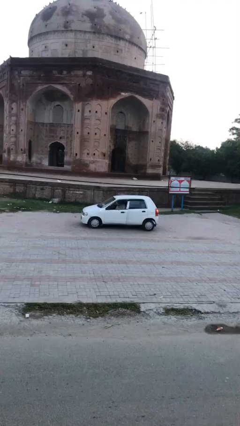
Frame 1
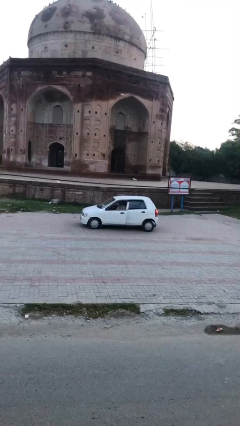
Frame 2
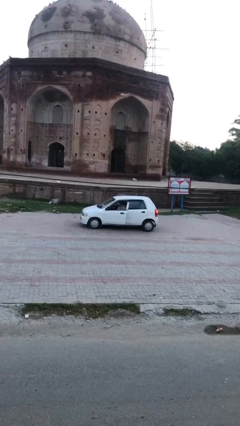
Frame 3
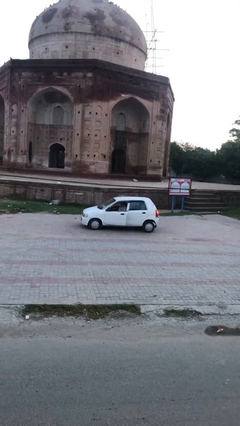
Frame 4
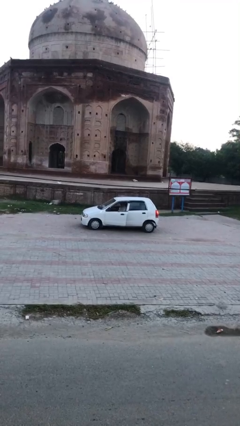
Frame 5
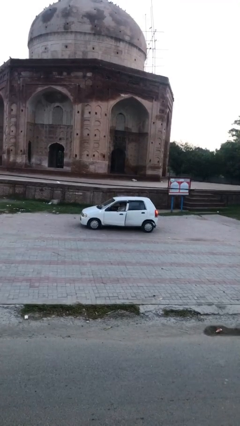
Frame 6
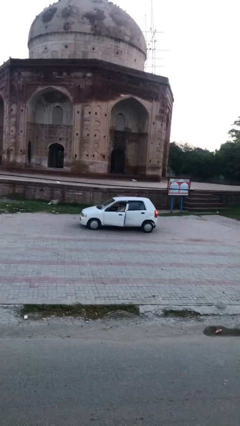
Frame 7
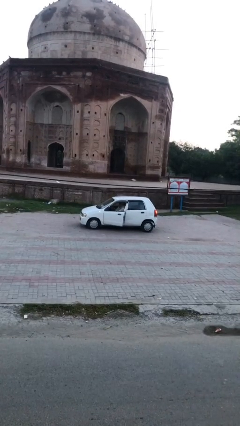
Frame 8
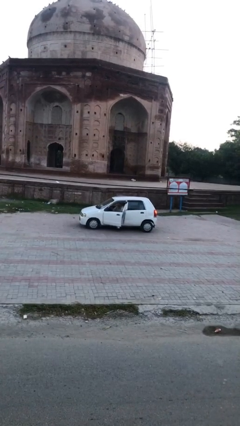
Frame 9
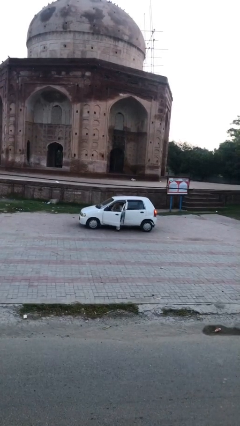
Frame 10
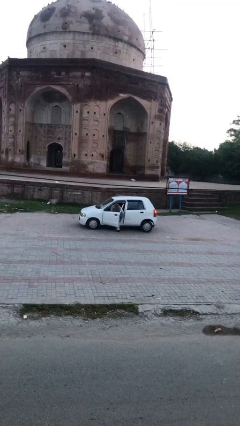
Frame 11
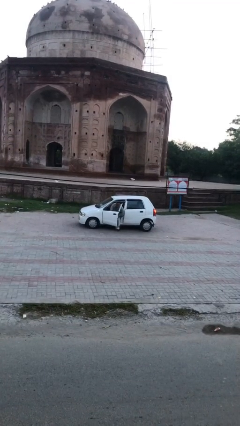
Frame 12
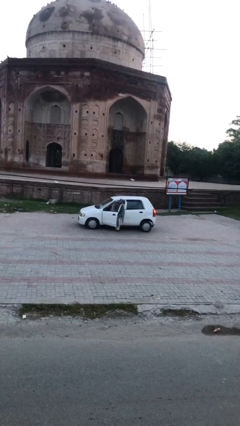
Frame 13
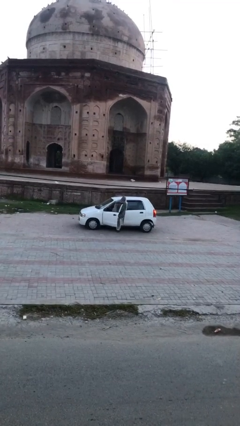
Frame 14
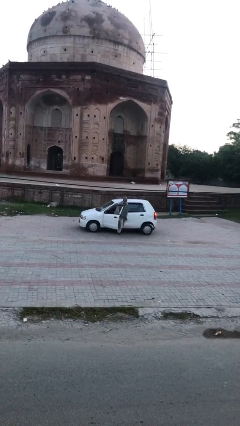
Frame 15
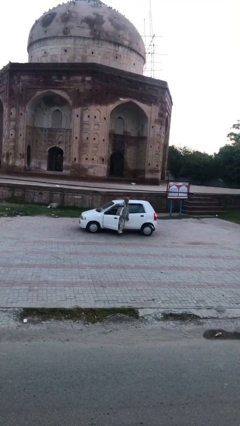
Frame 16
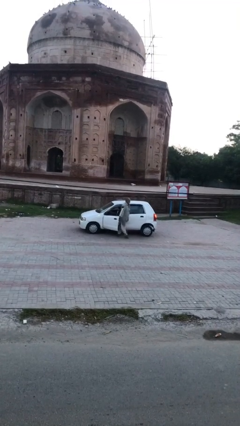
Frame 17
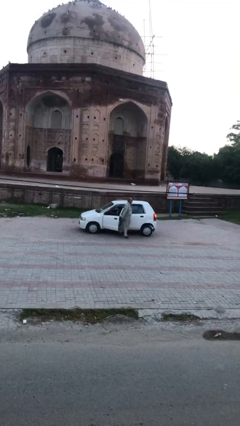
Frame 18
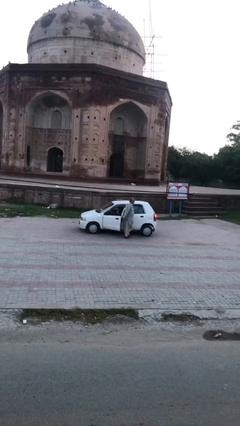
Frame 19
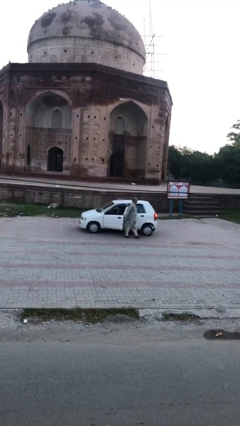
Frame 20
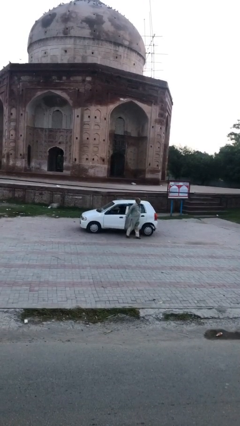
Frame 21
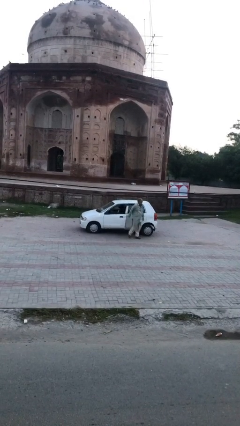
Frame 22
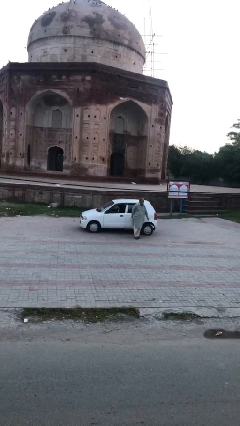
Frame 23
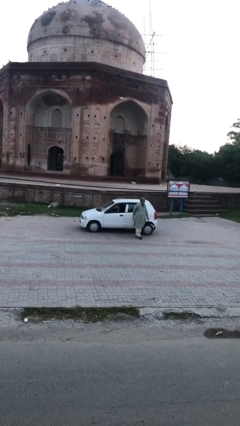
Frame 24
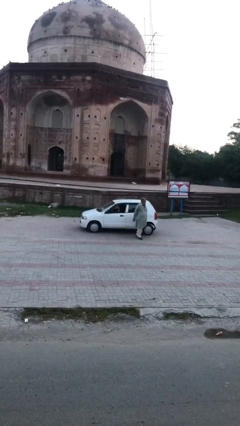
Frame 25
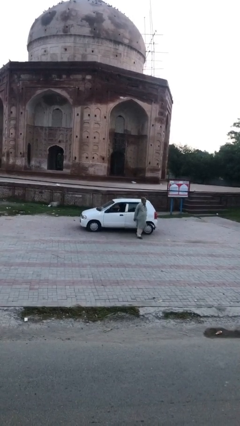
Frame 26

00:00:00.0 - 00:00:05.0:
car drops off person

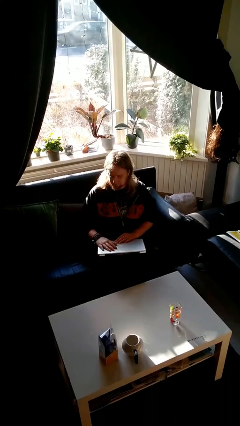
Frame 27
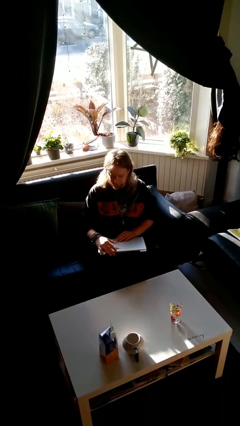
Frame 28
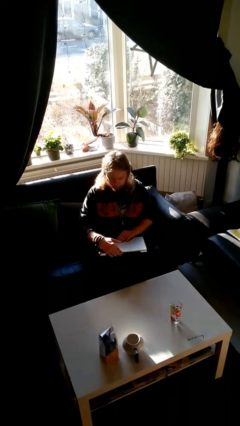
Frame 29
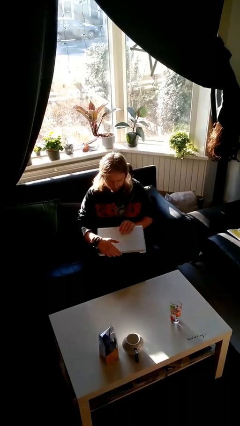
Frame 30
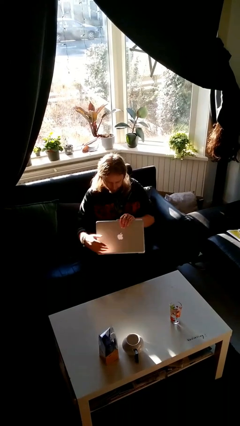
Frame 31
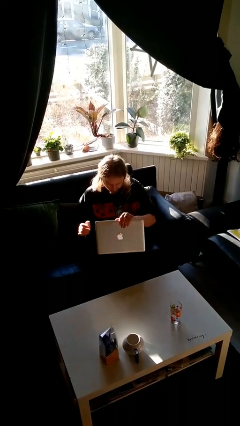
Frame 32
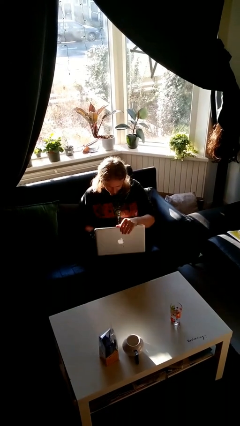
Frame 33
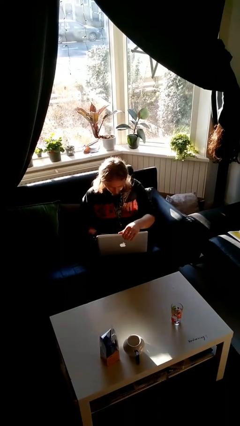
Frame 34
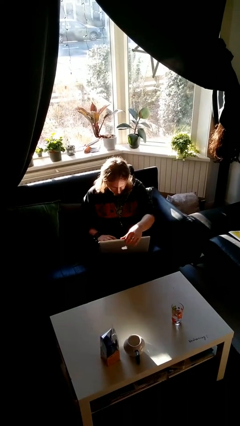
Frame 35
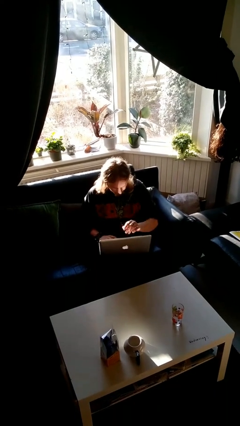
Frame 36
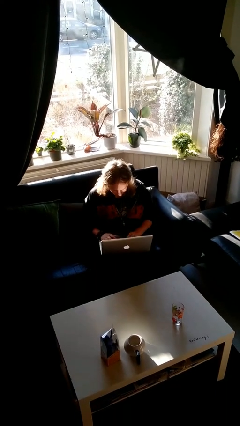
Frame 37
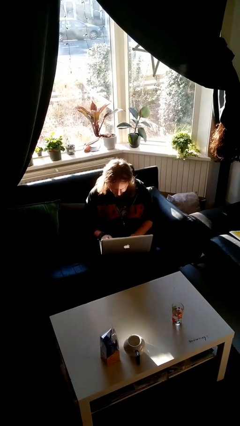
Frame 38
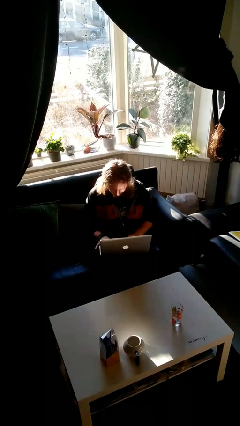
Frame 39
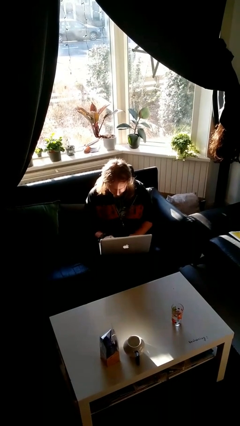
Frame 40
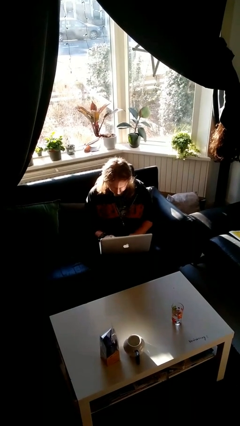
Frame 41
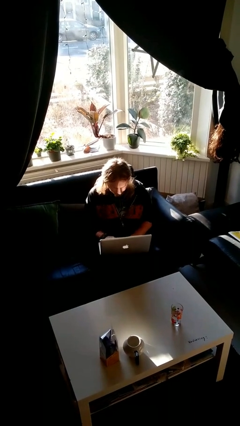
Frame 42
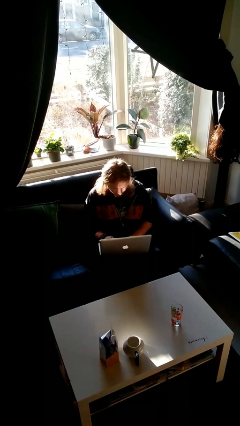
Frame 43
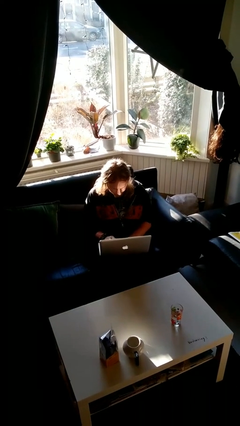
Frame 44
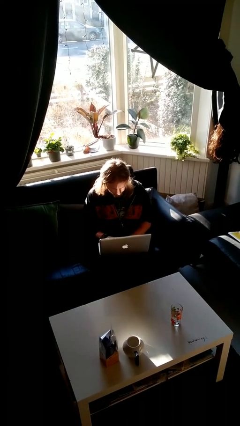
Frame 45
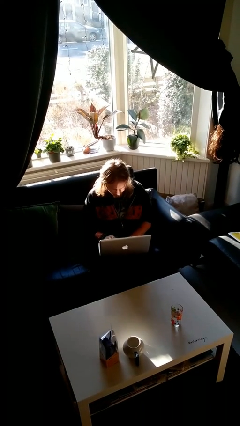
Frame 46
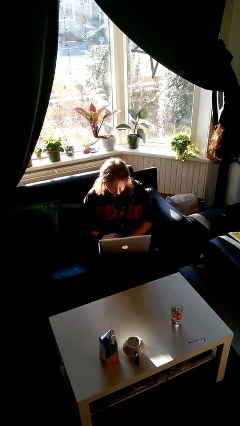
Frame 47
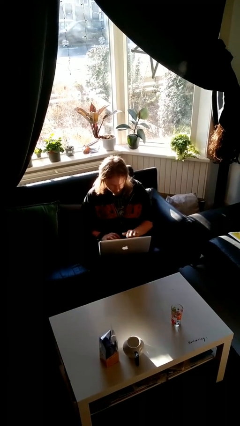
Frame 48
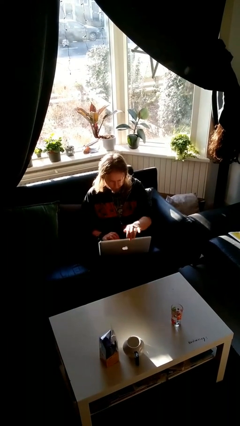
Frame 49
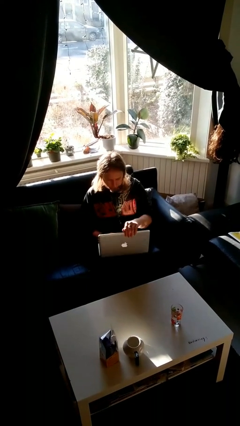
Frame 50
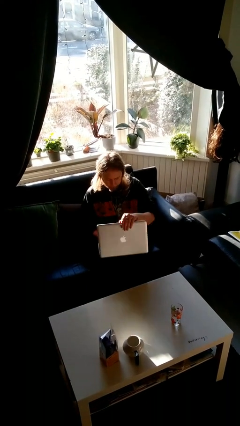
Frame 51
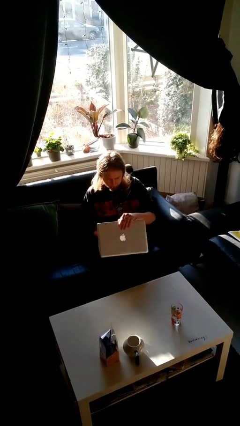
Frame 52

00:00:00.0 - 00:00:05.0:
person interacts with laptop

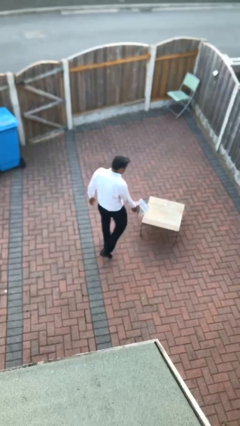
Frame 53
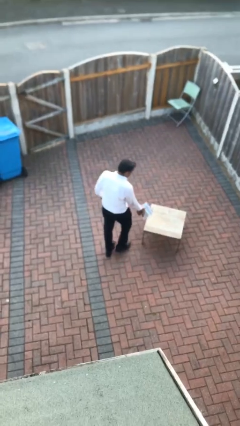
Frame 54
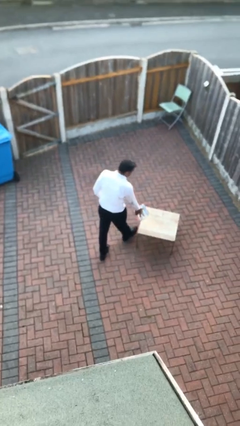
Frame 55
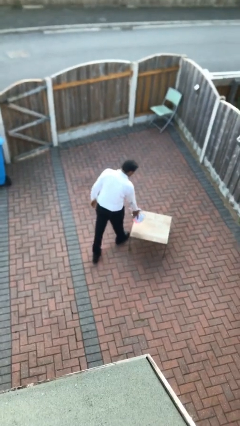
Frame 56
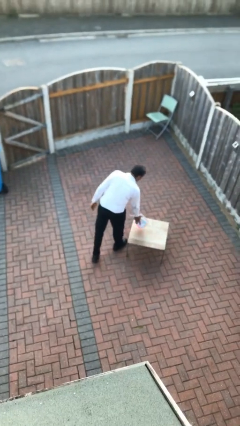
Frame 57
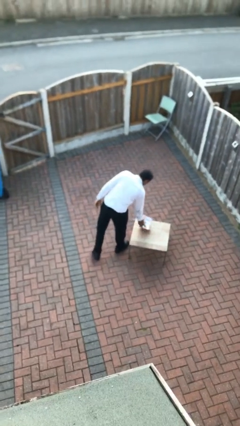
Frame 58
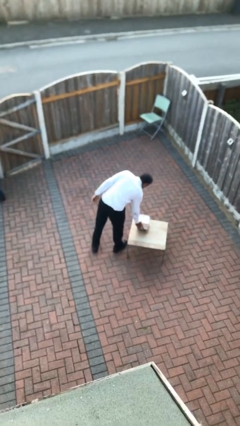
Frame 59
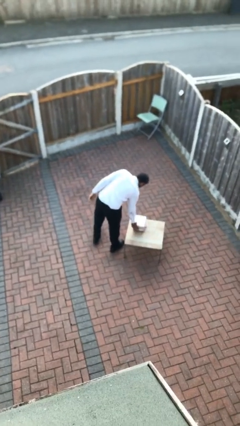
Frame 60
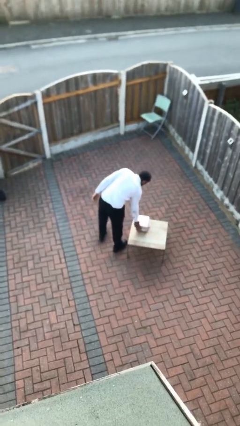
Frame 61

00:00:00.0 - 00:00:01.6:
person puts down object on table

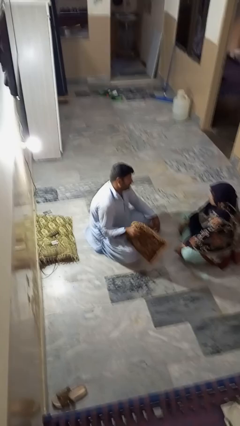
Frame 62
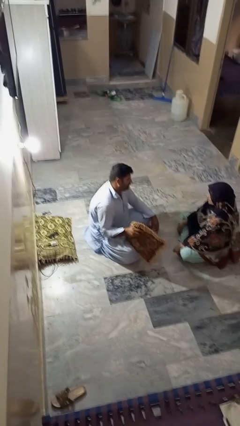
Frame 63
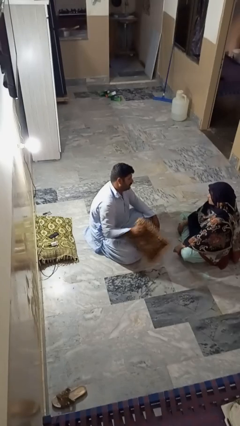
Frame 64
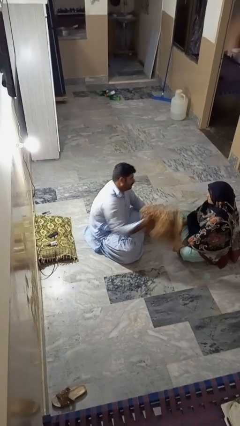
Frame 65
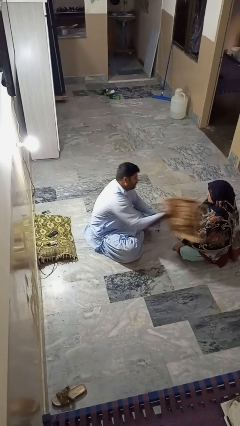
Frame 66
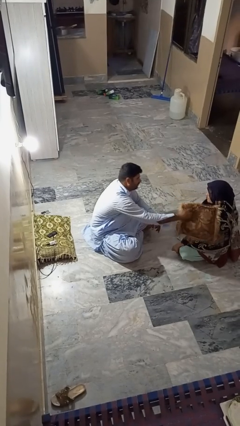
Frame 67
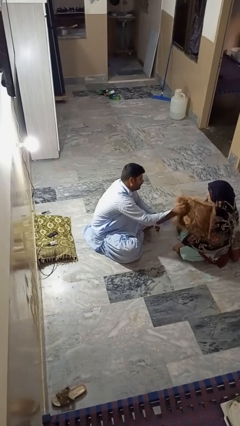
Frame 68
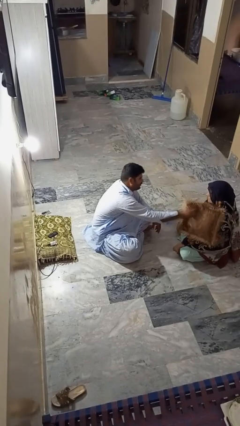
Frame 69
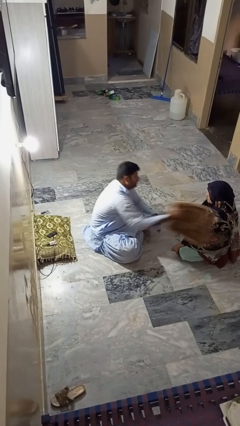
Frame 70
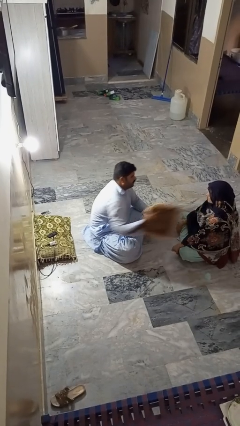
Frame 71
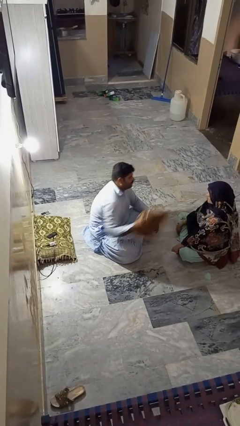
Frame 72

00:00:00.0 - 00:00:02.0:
person hits person with pillow

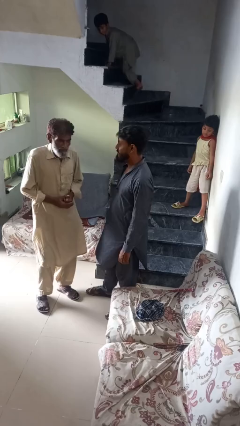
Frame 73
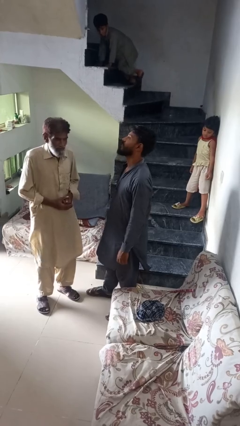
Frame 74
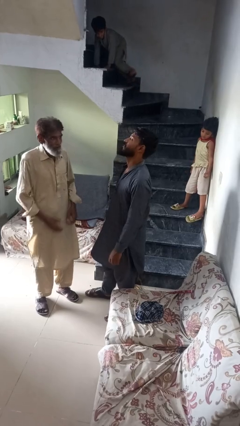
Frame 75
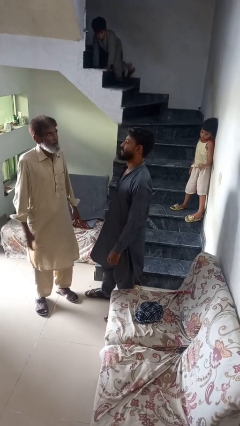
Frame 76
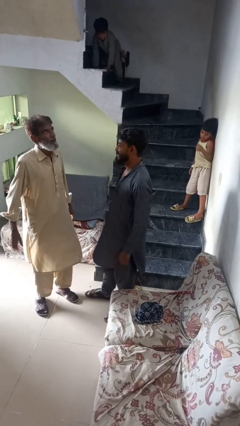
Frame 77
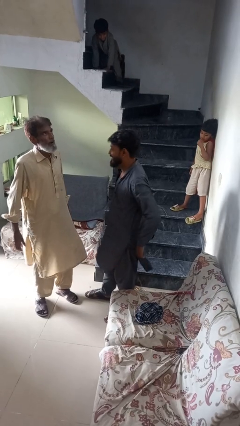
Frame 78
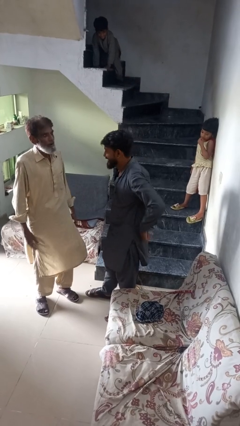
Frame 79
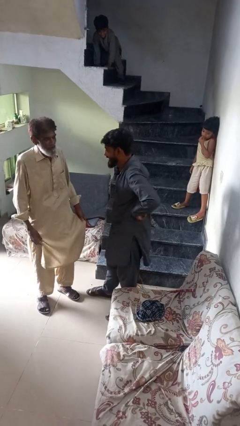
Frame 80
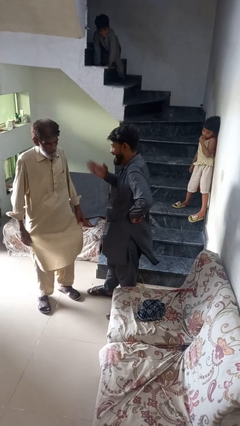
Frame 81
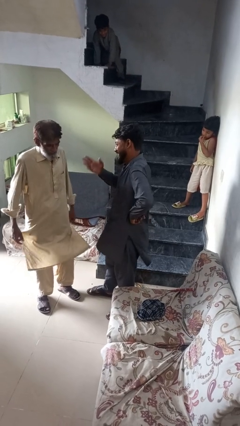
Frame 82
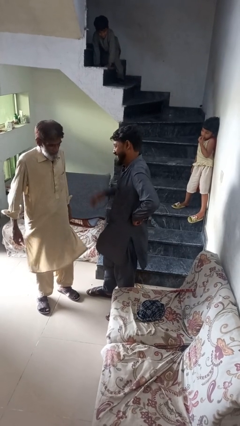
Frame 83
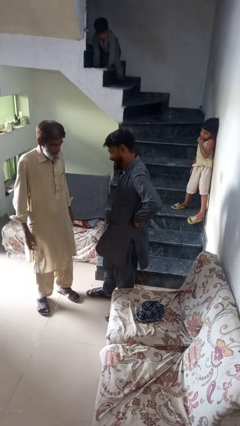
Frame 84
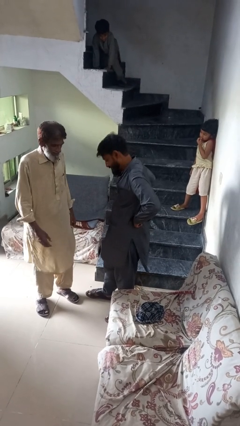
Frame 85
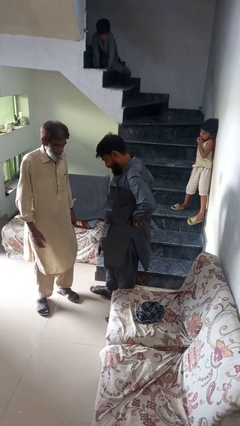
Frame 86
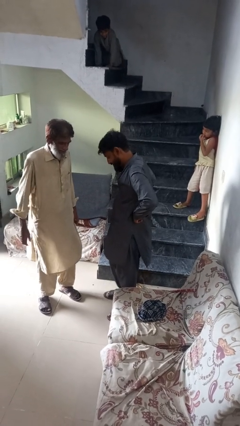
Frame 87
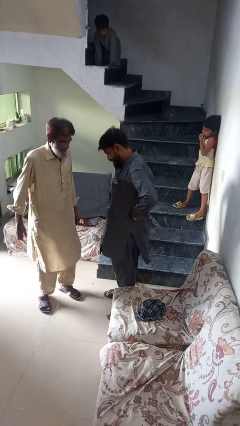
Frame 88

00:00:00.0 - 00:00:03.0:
person laughs with person

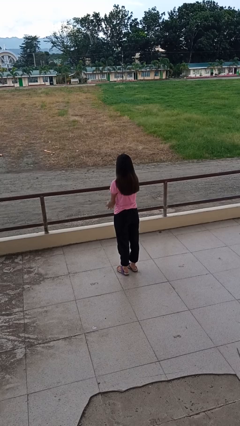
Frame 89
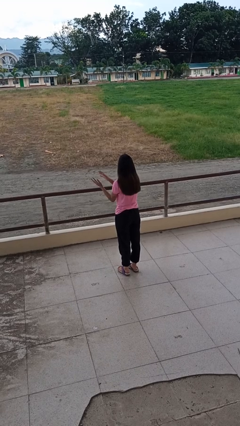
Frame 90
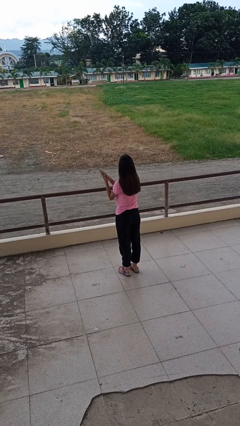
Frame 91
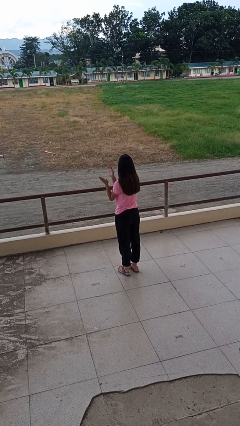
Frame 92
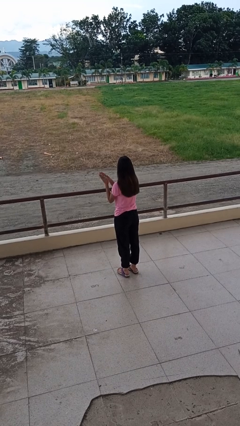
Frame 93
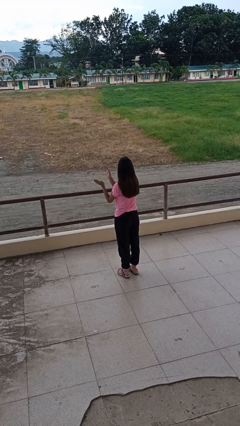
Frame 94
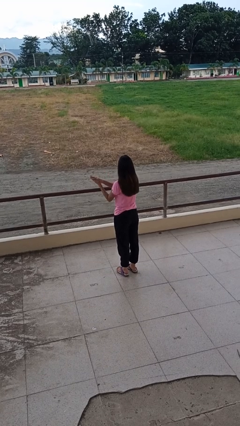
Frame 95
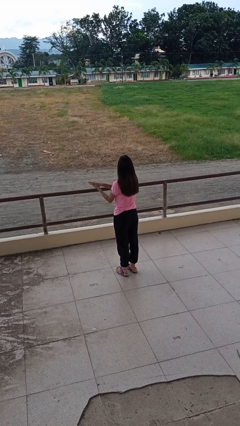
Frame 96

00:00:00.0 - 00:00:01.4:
person claps hands
